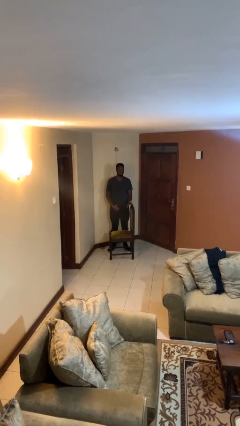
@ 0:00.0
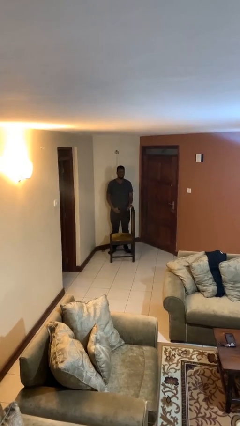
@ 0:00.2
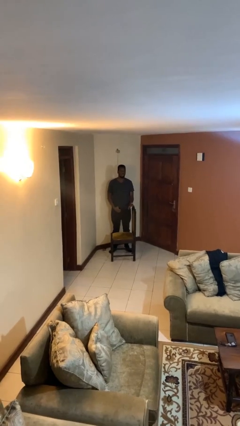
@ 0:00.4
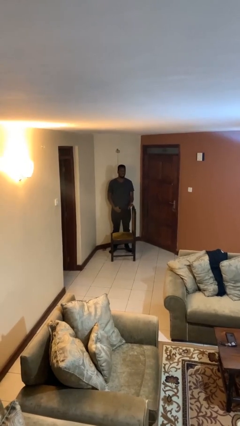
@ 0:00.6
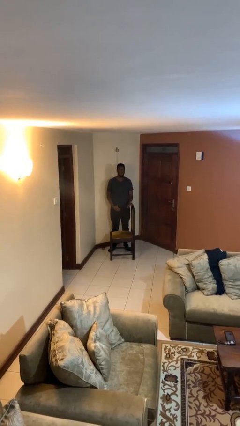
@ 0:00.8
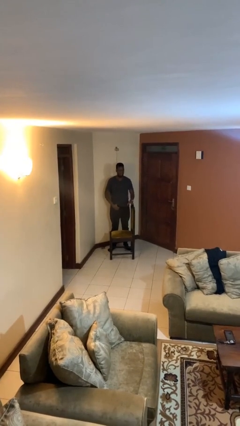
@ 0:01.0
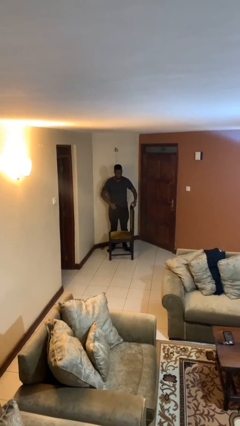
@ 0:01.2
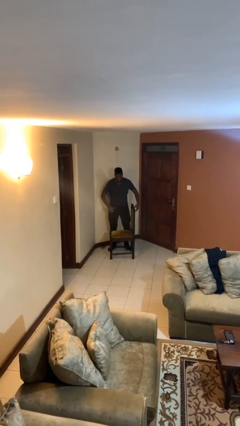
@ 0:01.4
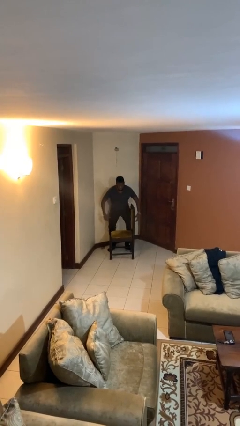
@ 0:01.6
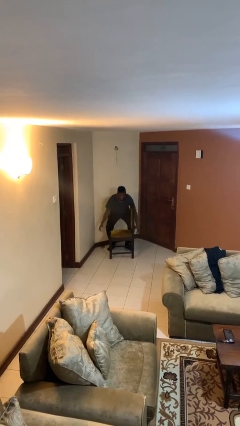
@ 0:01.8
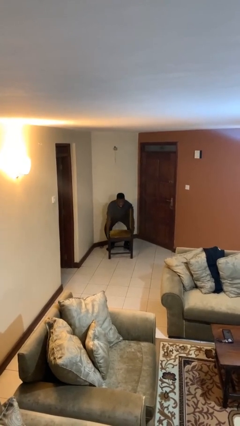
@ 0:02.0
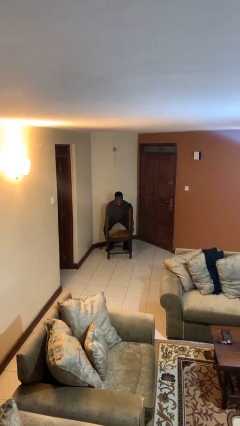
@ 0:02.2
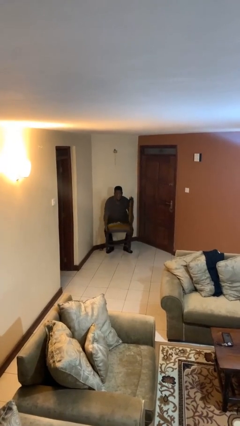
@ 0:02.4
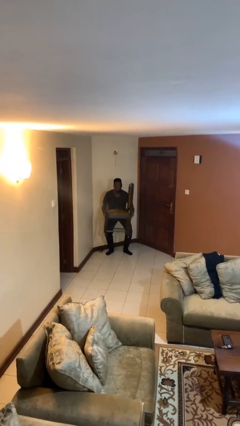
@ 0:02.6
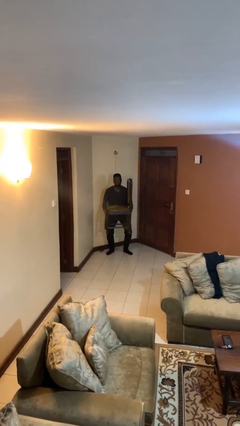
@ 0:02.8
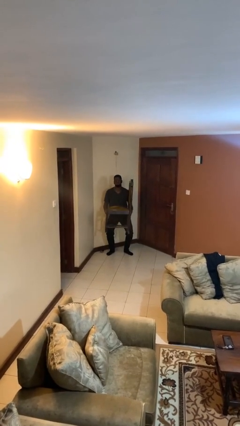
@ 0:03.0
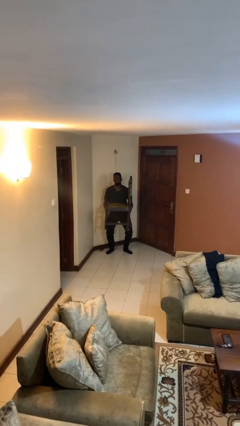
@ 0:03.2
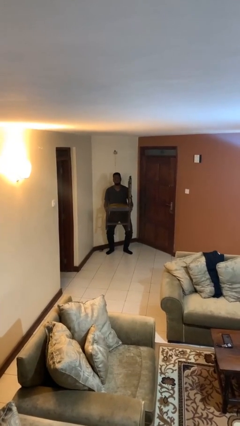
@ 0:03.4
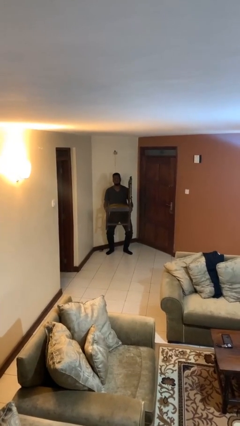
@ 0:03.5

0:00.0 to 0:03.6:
person picks up object from floor

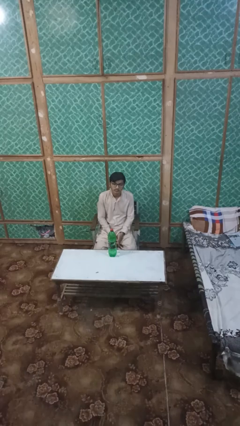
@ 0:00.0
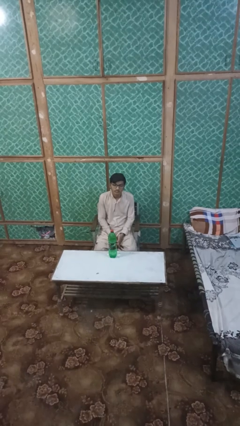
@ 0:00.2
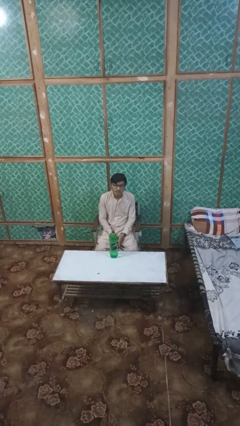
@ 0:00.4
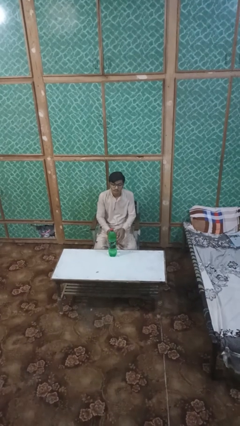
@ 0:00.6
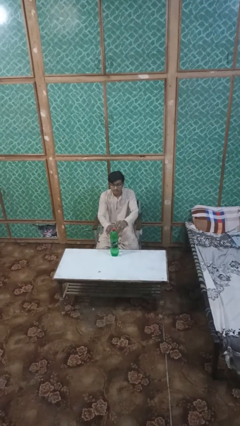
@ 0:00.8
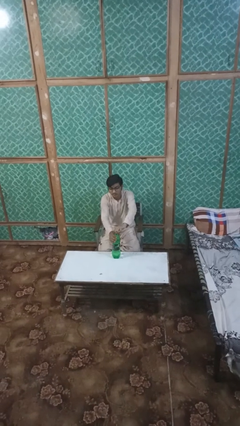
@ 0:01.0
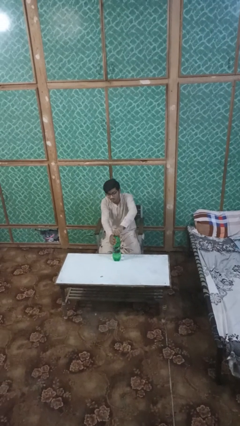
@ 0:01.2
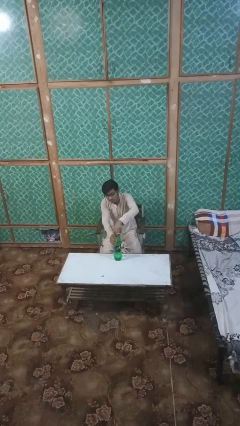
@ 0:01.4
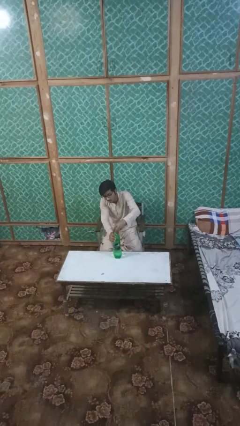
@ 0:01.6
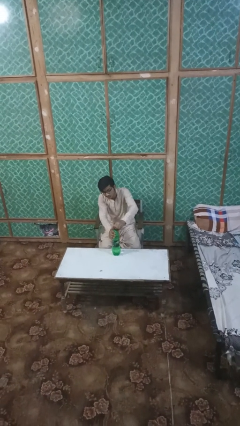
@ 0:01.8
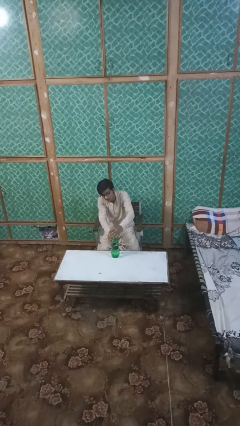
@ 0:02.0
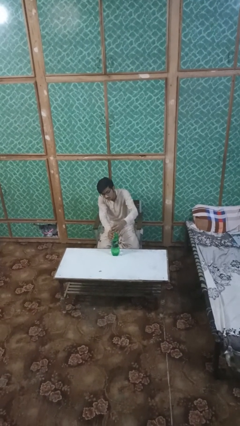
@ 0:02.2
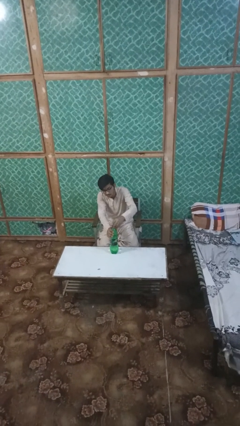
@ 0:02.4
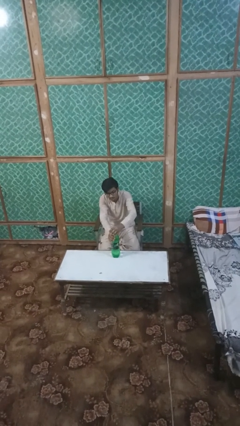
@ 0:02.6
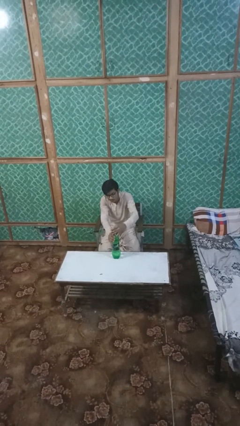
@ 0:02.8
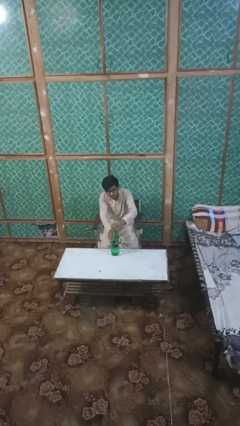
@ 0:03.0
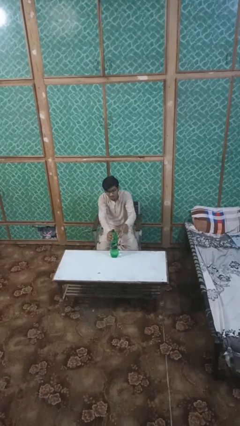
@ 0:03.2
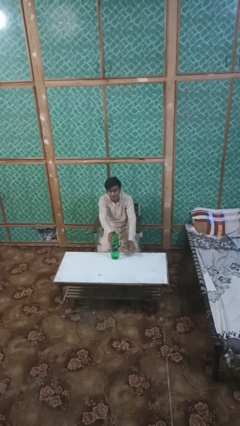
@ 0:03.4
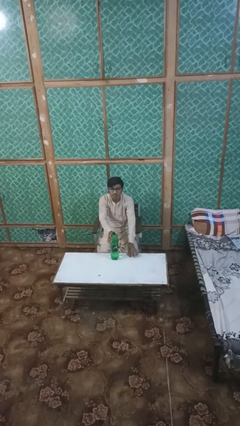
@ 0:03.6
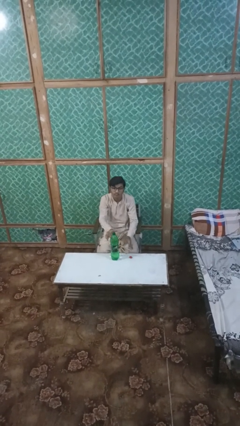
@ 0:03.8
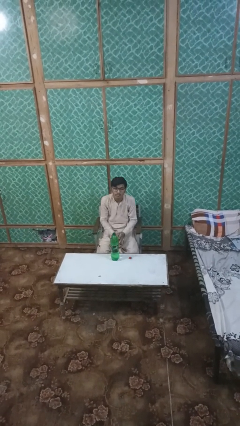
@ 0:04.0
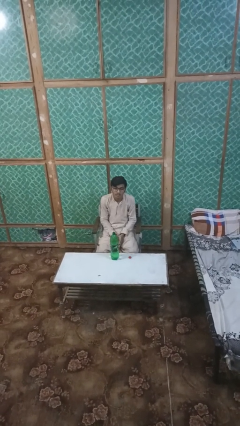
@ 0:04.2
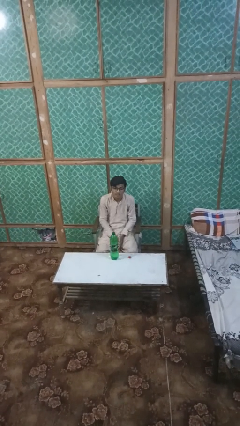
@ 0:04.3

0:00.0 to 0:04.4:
person unscrews lid from bottle

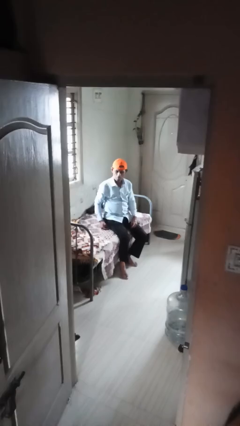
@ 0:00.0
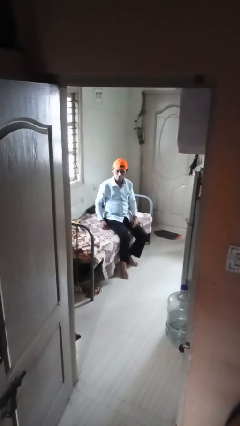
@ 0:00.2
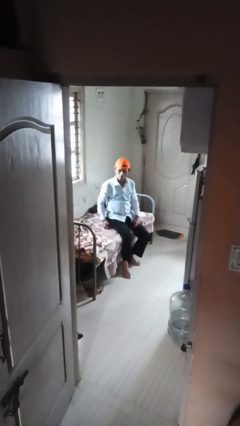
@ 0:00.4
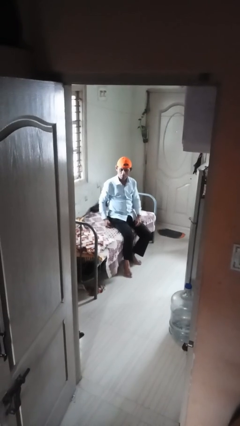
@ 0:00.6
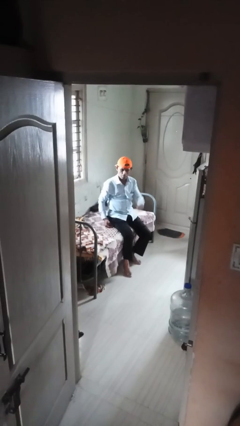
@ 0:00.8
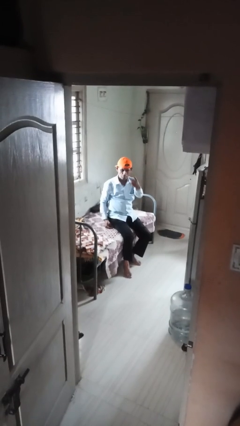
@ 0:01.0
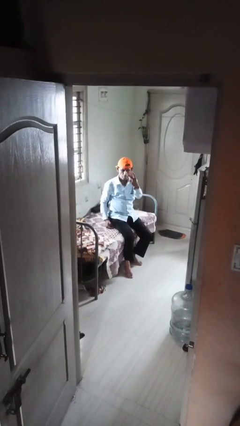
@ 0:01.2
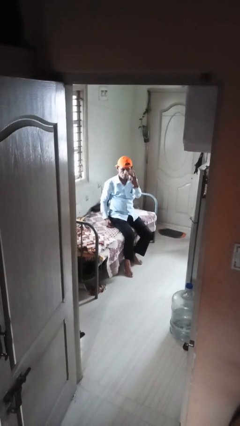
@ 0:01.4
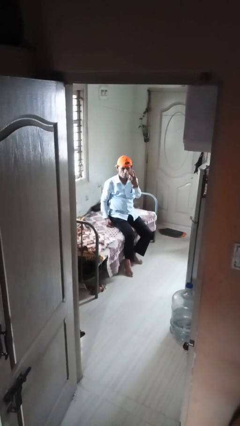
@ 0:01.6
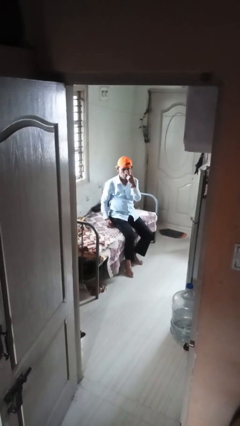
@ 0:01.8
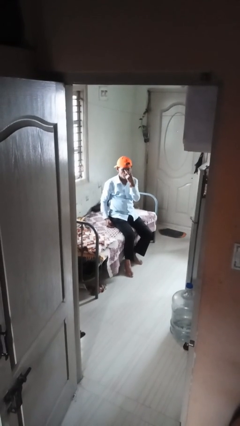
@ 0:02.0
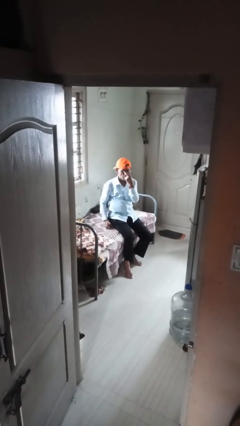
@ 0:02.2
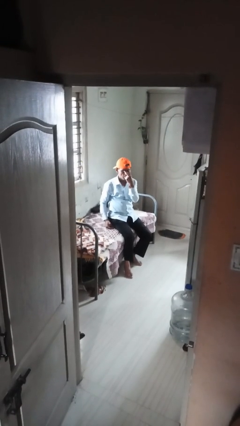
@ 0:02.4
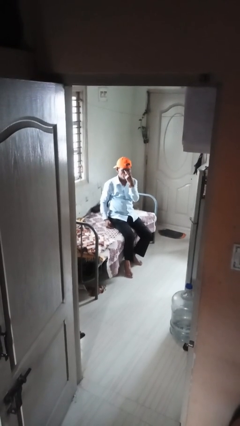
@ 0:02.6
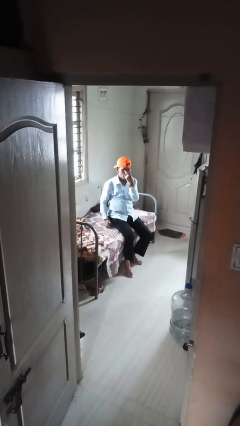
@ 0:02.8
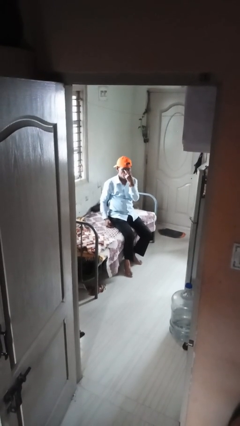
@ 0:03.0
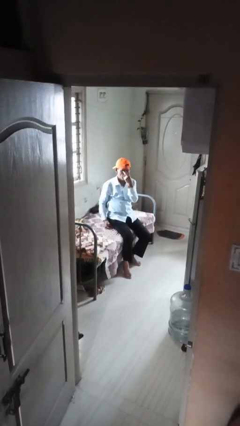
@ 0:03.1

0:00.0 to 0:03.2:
person gestures watch closely

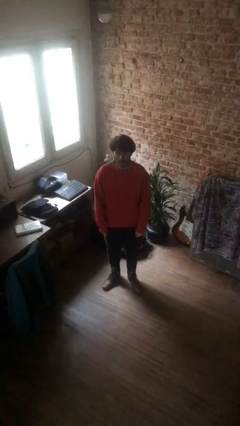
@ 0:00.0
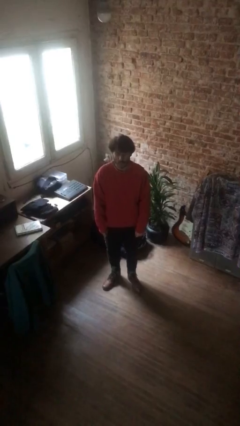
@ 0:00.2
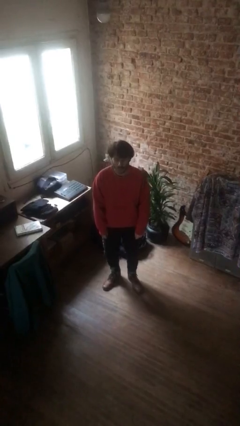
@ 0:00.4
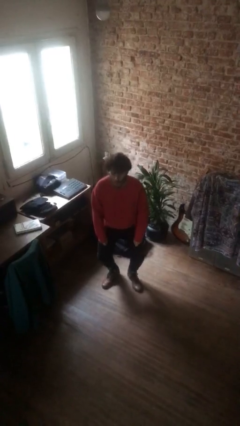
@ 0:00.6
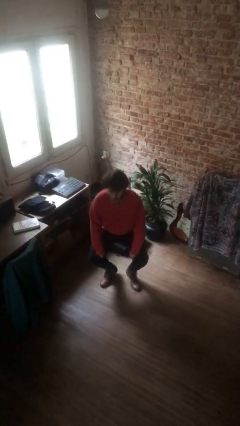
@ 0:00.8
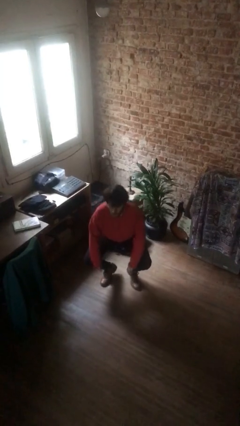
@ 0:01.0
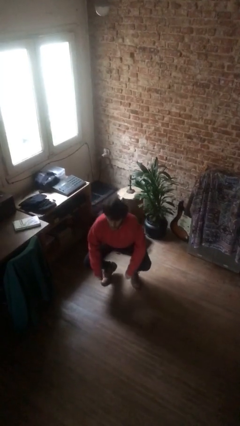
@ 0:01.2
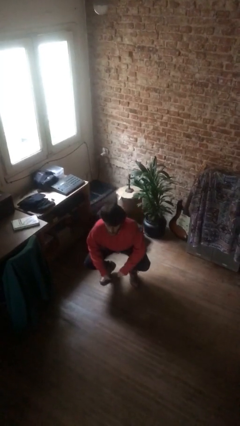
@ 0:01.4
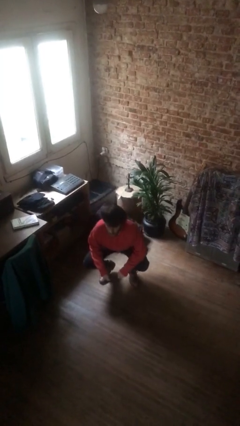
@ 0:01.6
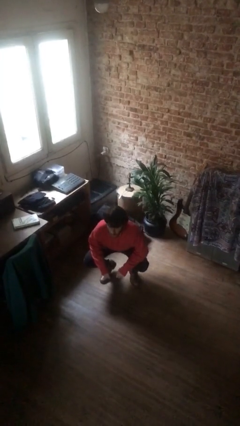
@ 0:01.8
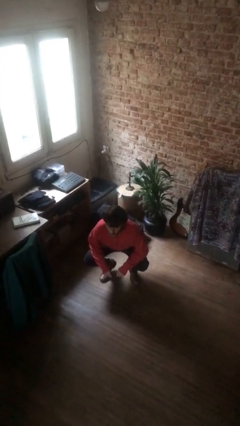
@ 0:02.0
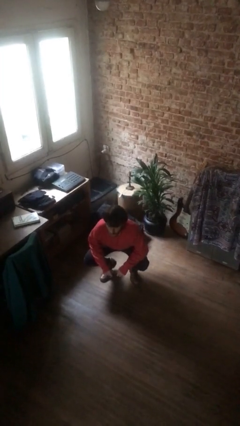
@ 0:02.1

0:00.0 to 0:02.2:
person squats

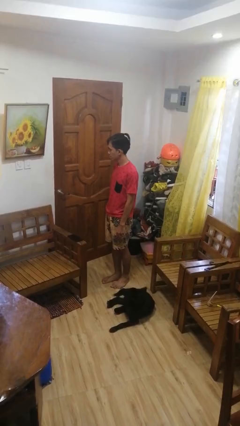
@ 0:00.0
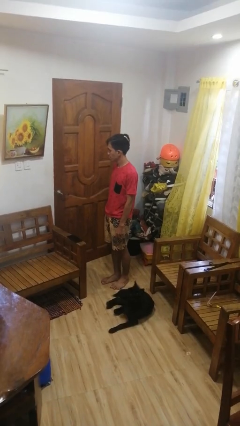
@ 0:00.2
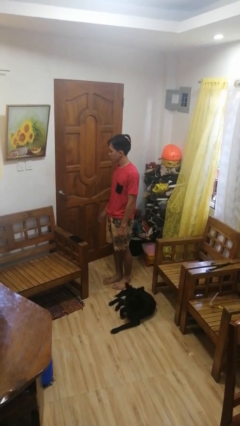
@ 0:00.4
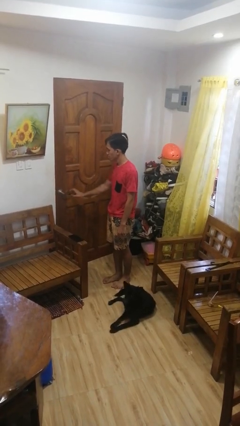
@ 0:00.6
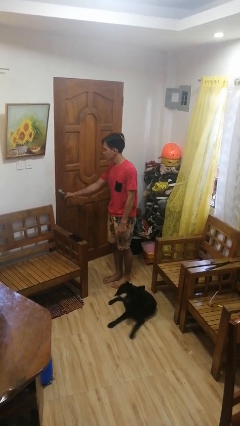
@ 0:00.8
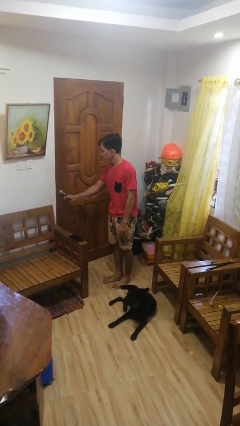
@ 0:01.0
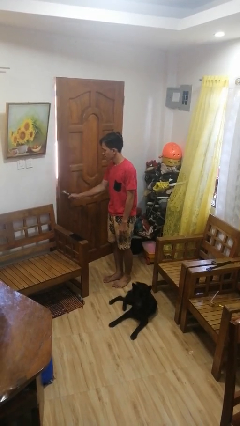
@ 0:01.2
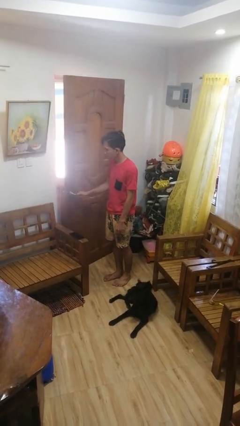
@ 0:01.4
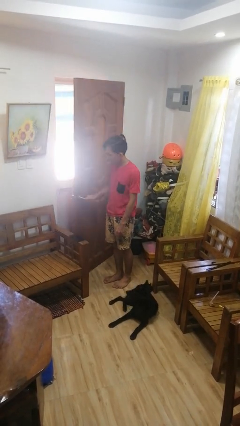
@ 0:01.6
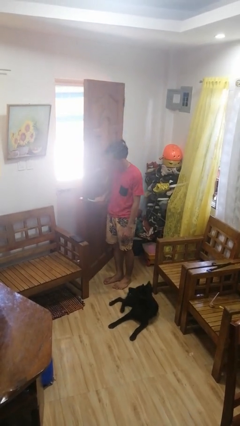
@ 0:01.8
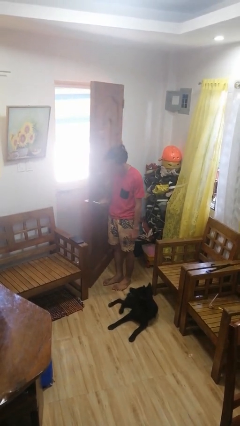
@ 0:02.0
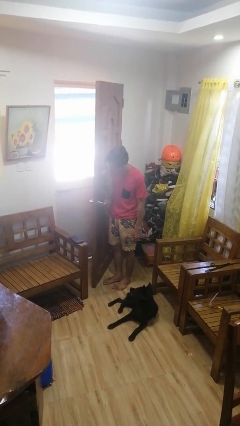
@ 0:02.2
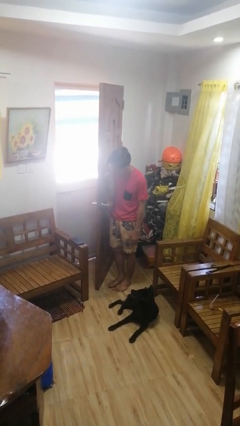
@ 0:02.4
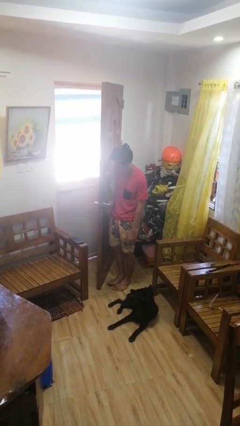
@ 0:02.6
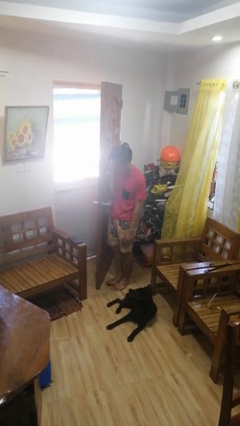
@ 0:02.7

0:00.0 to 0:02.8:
person opens facility door

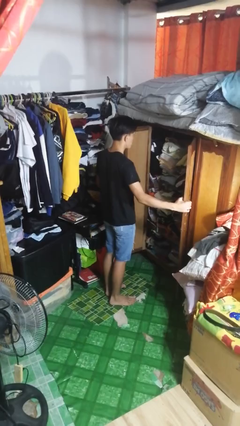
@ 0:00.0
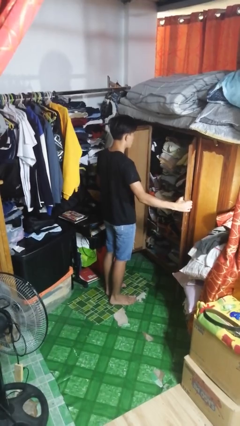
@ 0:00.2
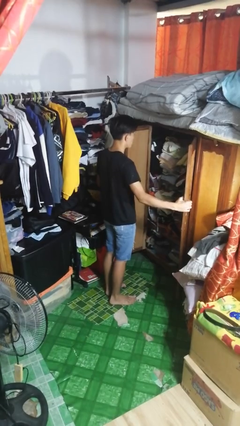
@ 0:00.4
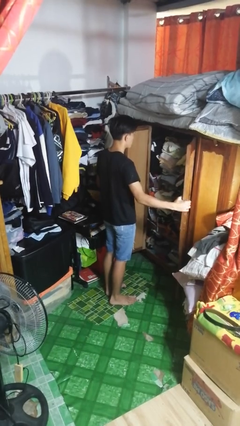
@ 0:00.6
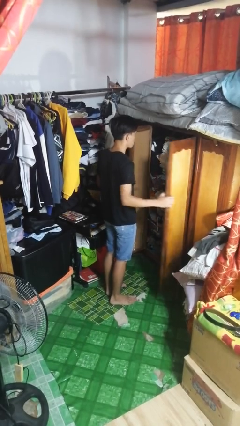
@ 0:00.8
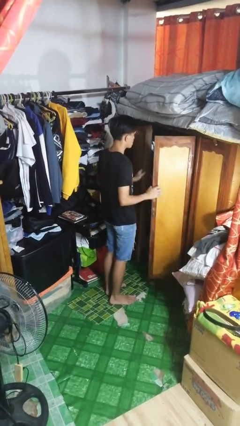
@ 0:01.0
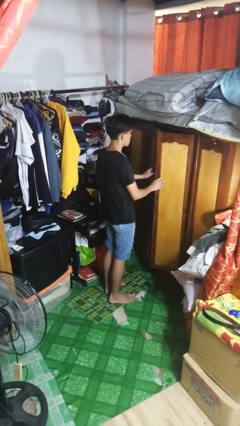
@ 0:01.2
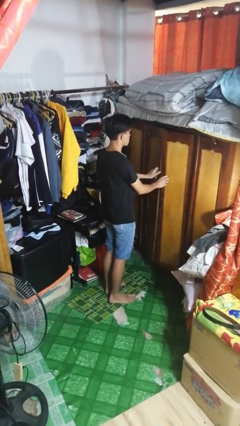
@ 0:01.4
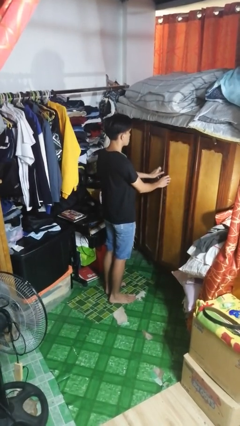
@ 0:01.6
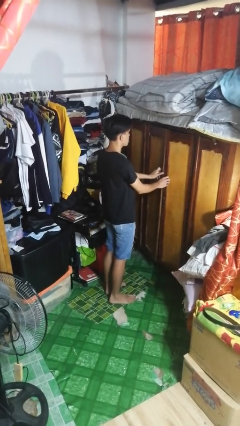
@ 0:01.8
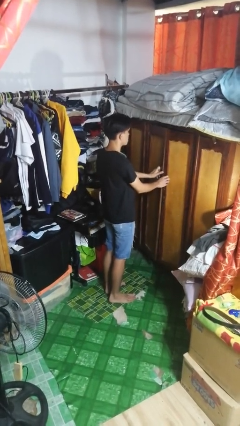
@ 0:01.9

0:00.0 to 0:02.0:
person closes closet door
